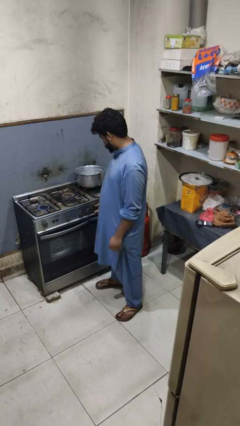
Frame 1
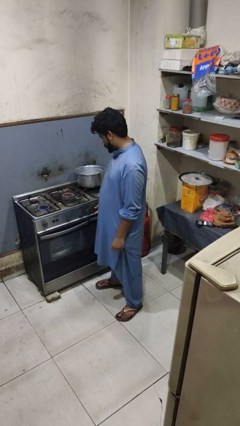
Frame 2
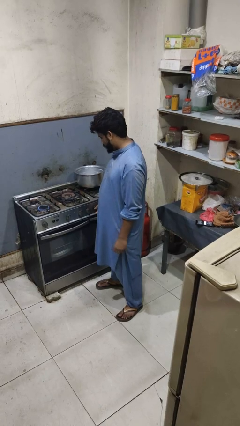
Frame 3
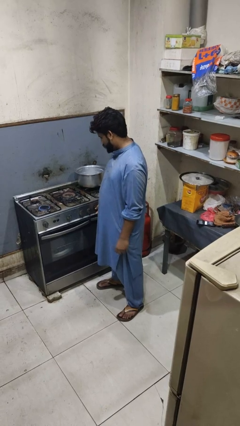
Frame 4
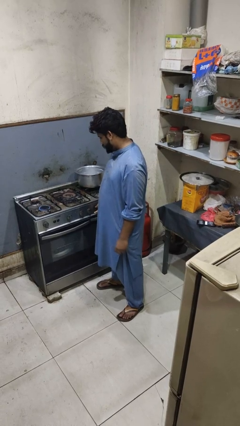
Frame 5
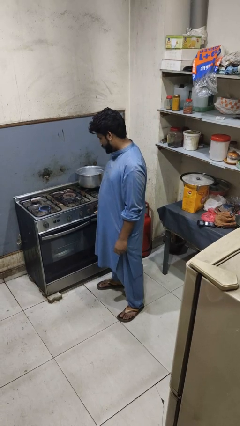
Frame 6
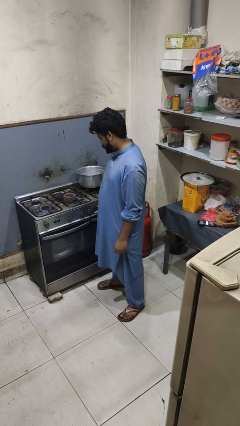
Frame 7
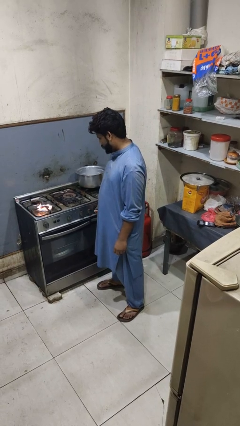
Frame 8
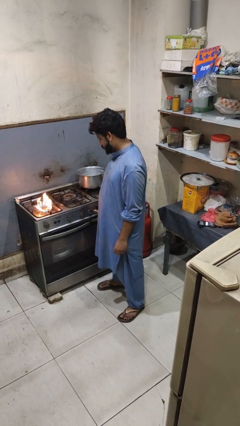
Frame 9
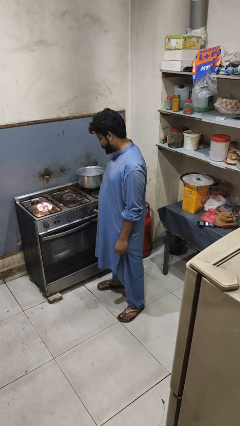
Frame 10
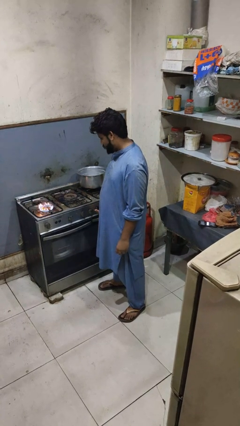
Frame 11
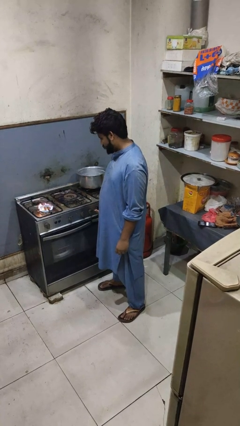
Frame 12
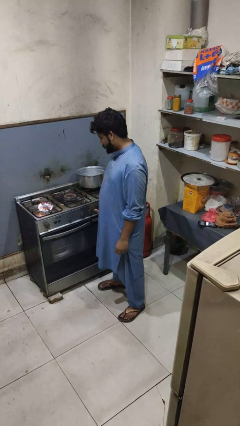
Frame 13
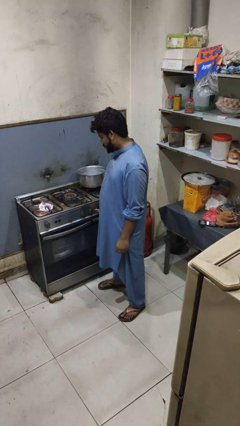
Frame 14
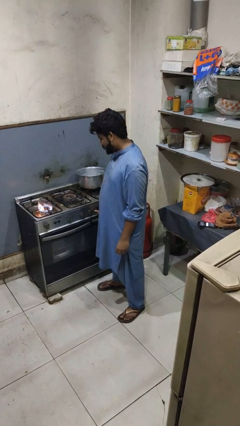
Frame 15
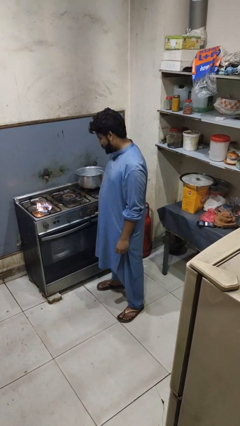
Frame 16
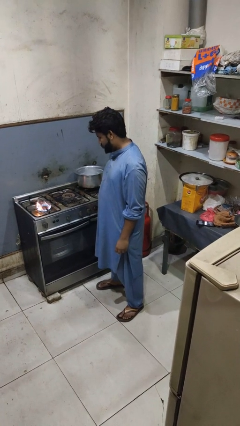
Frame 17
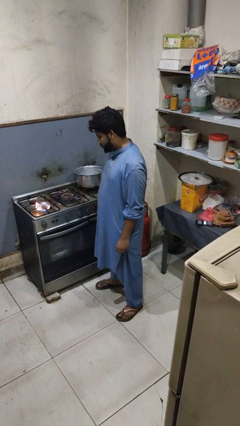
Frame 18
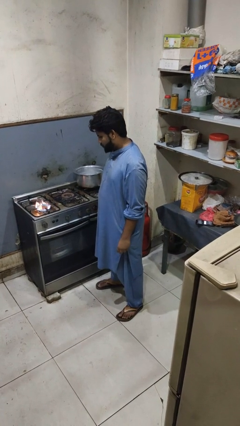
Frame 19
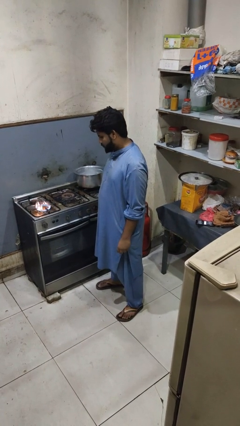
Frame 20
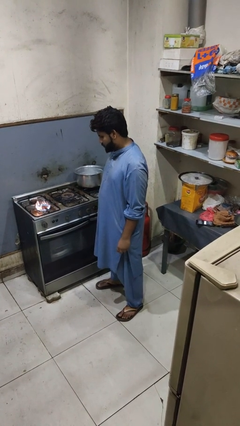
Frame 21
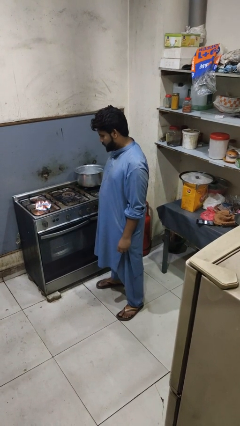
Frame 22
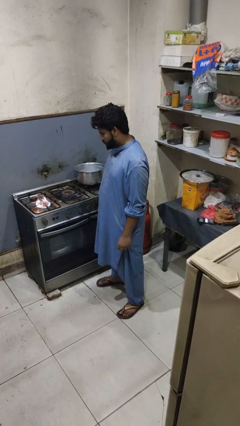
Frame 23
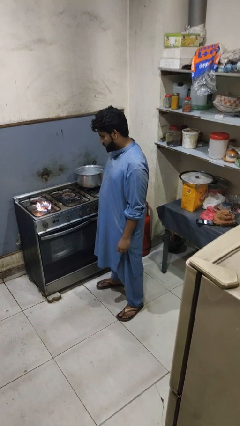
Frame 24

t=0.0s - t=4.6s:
person turns on stovetop

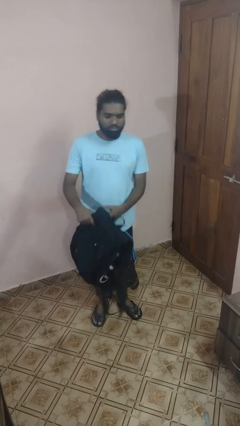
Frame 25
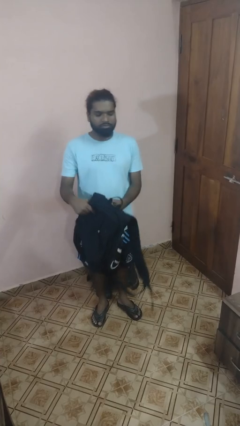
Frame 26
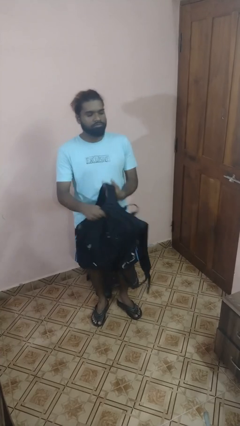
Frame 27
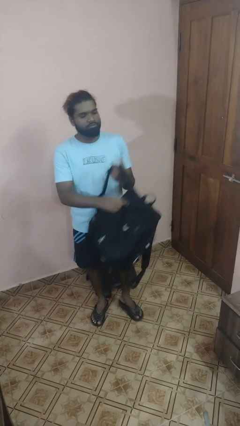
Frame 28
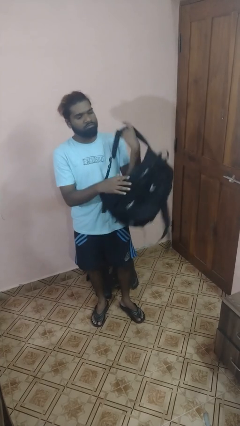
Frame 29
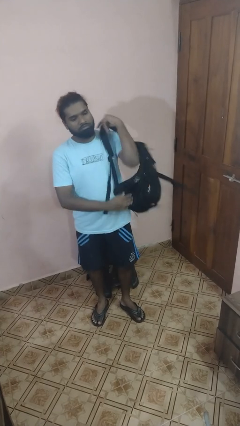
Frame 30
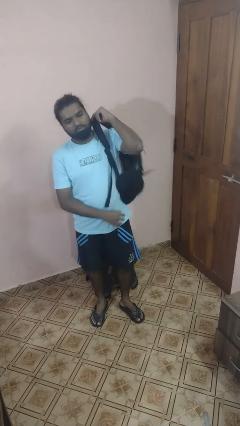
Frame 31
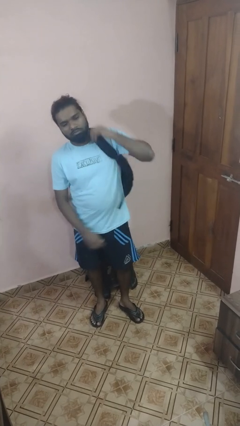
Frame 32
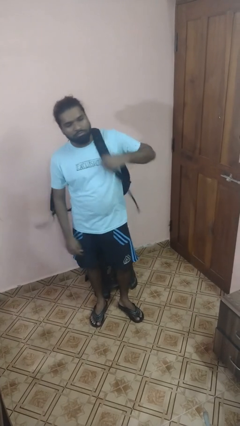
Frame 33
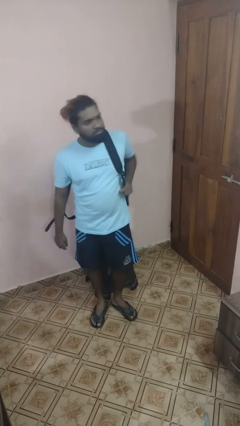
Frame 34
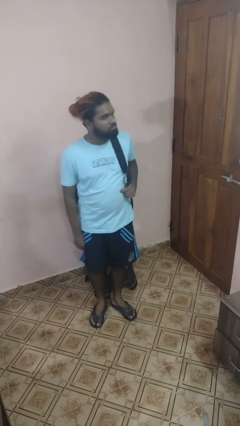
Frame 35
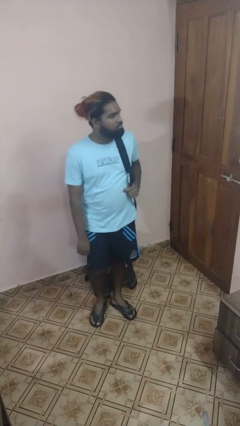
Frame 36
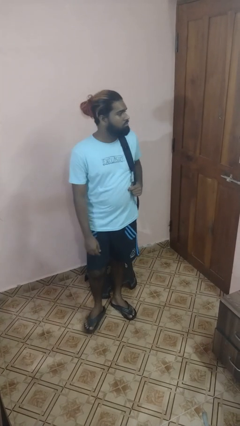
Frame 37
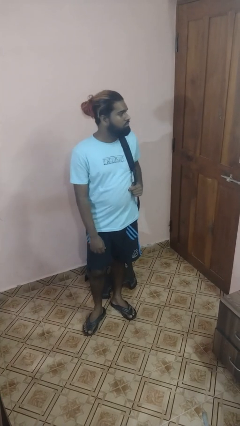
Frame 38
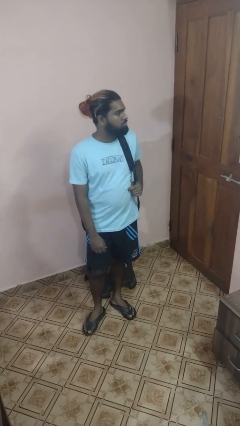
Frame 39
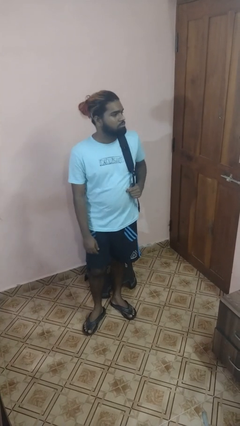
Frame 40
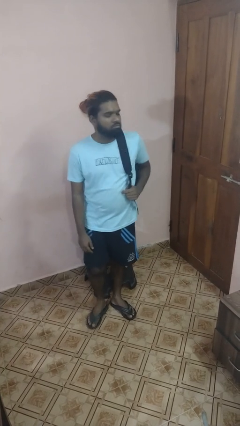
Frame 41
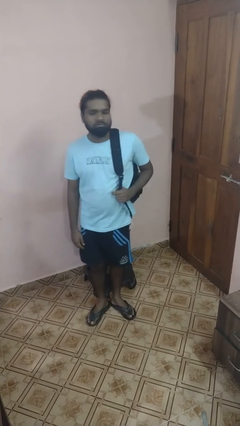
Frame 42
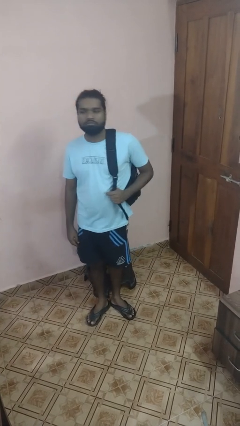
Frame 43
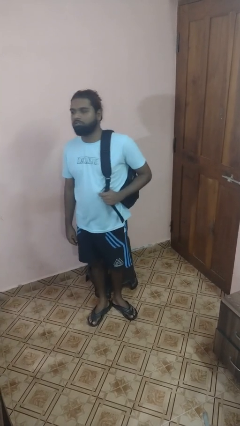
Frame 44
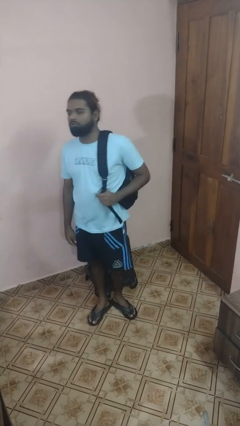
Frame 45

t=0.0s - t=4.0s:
person puts on backpack

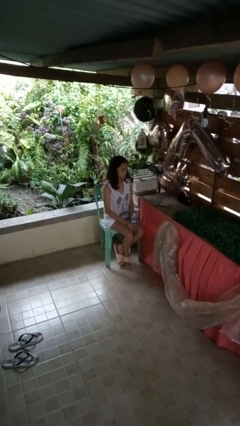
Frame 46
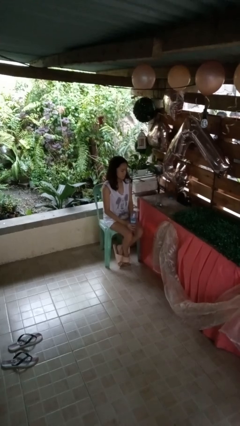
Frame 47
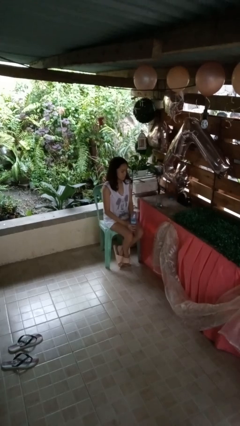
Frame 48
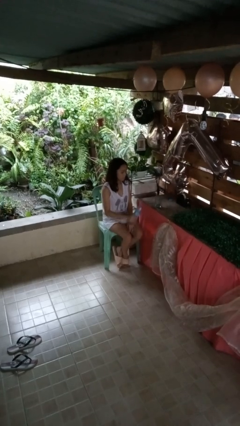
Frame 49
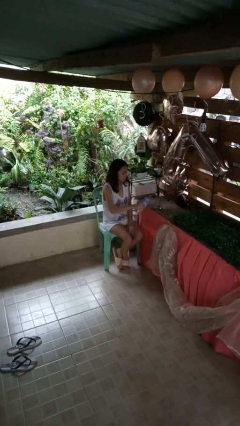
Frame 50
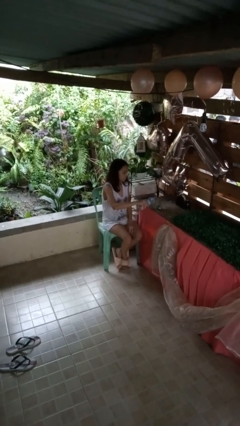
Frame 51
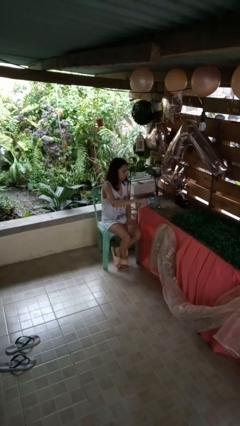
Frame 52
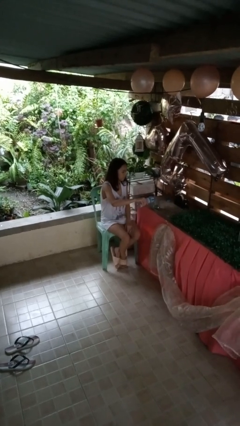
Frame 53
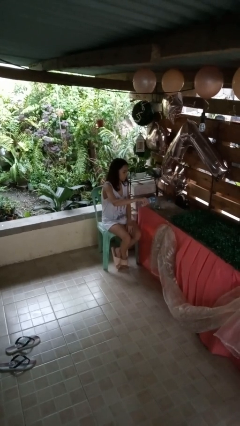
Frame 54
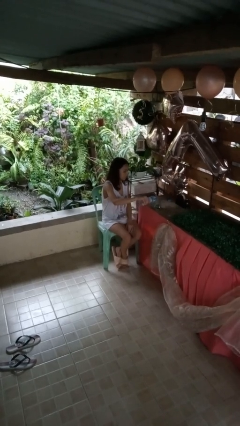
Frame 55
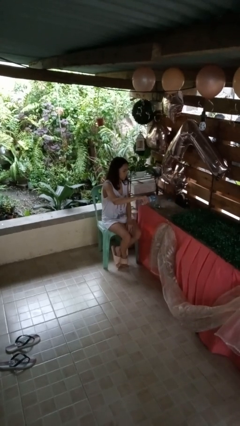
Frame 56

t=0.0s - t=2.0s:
person pours liquid into cup

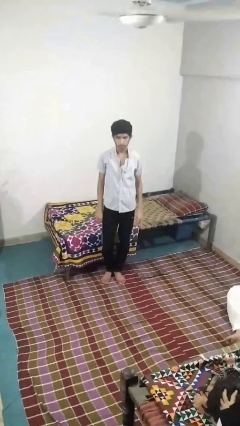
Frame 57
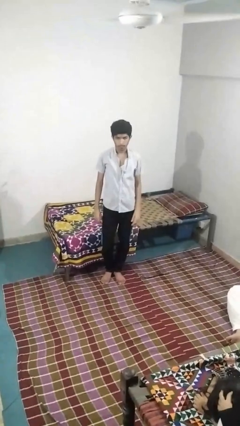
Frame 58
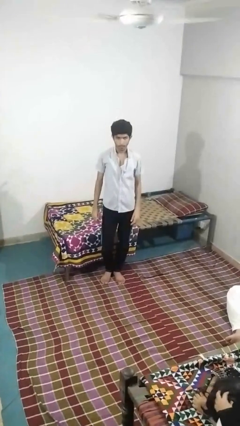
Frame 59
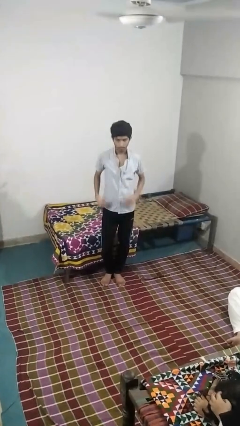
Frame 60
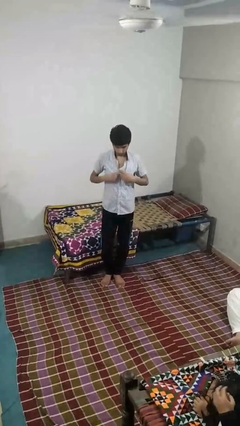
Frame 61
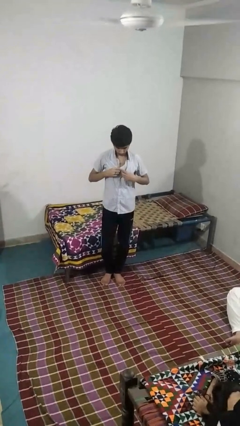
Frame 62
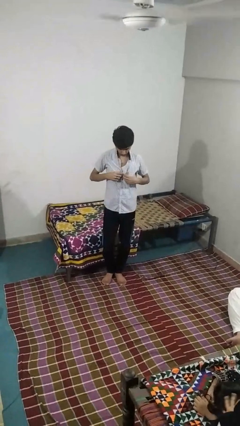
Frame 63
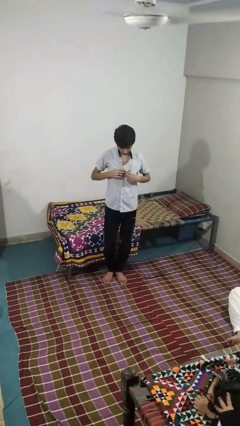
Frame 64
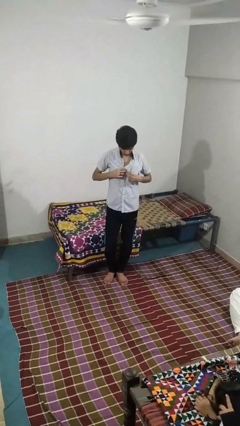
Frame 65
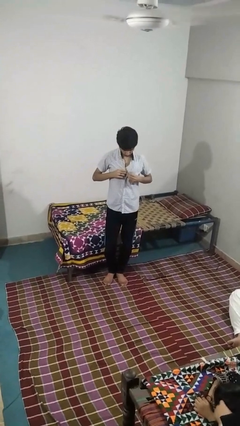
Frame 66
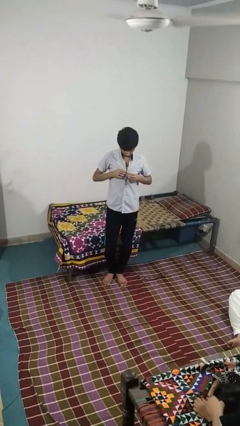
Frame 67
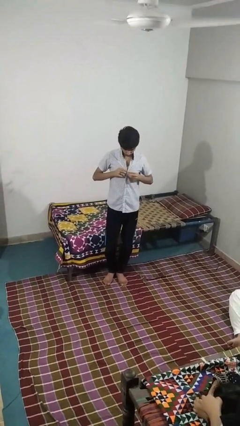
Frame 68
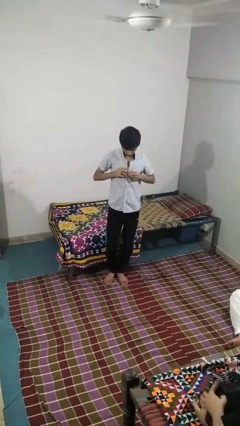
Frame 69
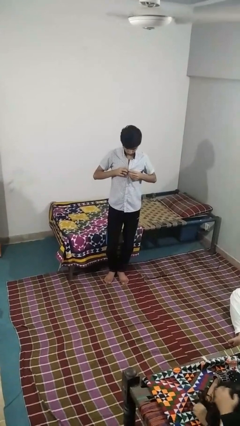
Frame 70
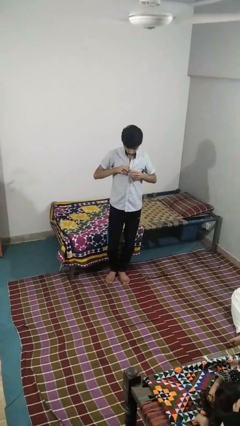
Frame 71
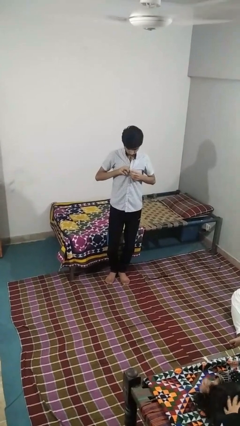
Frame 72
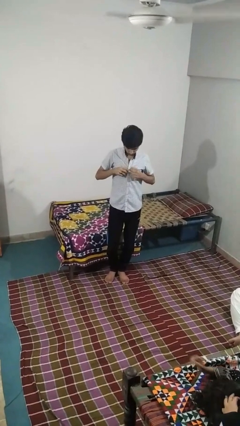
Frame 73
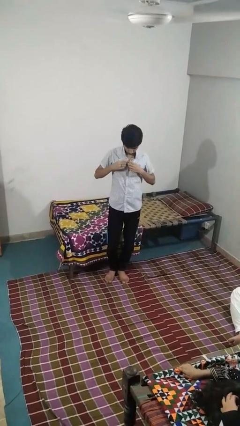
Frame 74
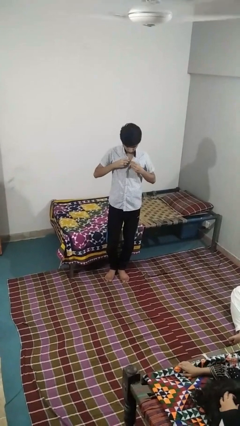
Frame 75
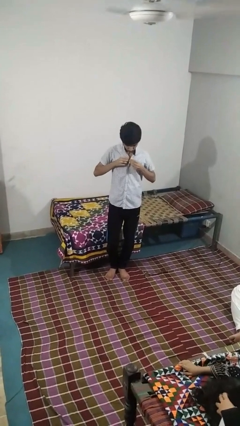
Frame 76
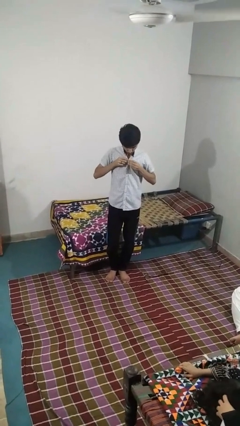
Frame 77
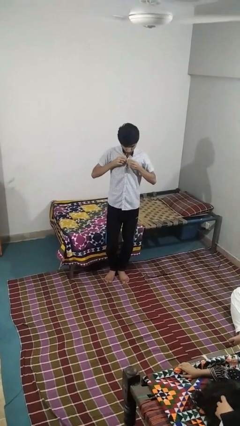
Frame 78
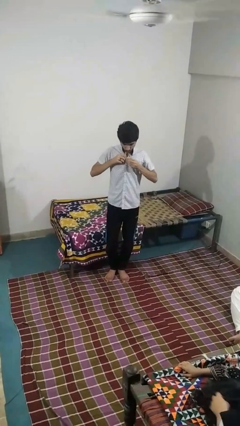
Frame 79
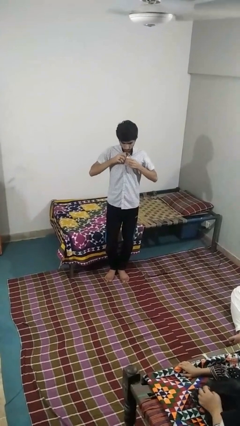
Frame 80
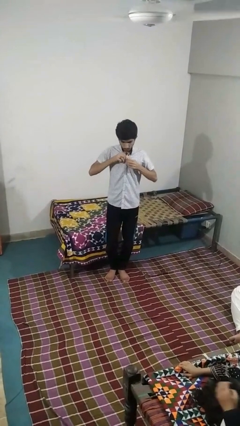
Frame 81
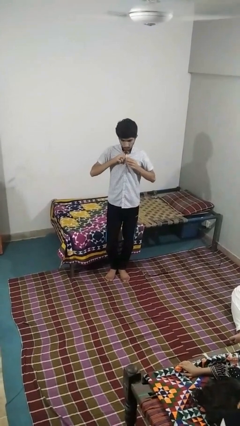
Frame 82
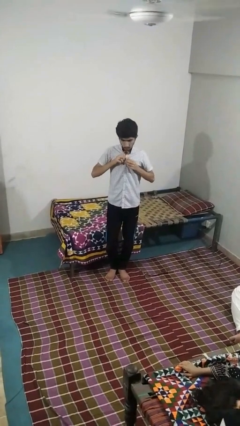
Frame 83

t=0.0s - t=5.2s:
person buttons shirt

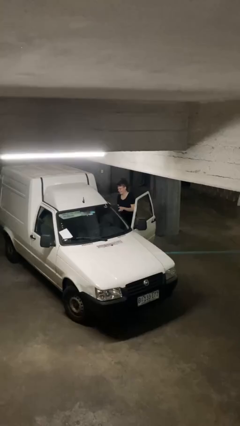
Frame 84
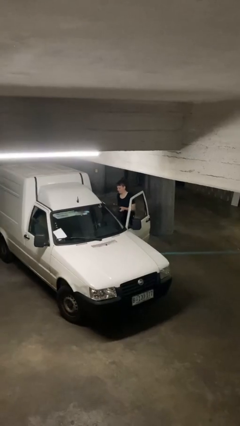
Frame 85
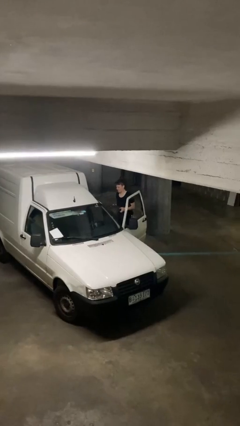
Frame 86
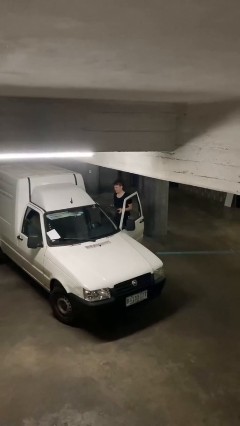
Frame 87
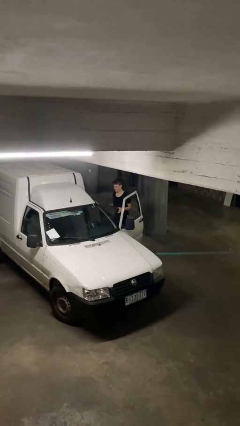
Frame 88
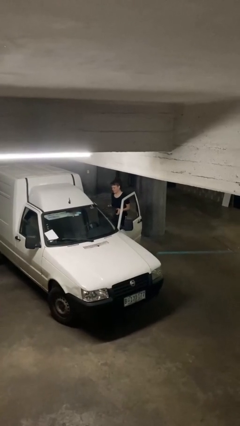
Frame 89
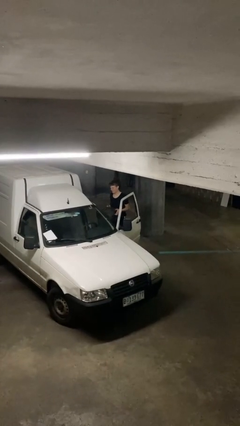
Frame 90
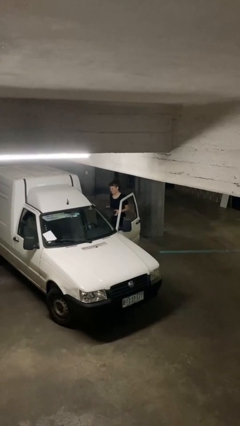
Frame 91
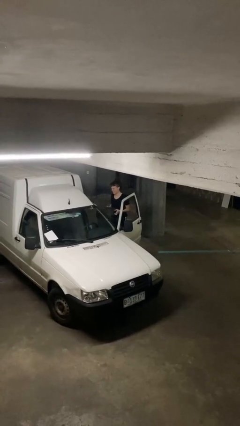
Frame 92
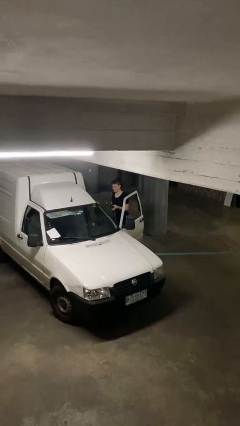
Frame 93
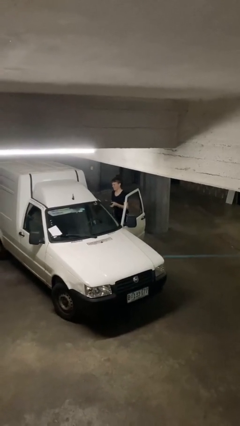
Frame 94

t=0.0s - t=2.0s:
person unloads car
